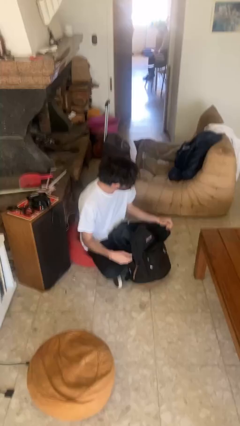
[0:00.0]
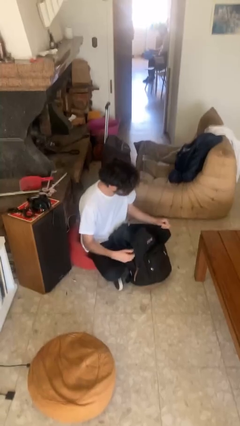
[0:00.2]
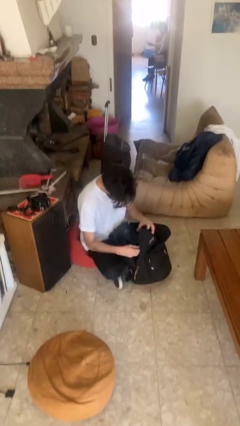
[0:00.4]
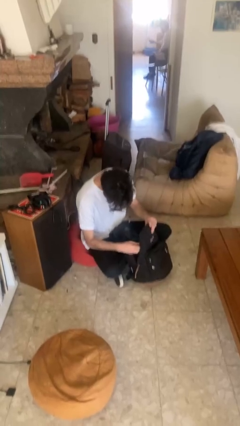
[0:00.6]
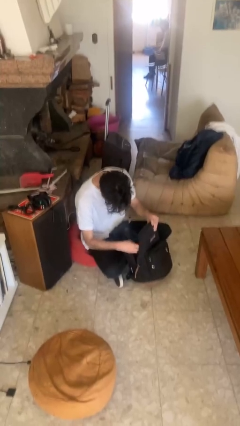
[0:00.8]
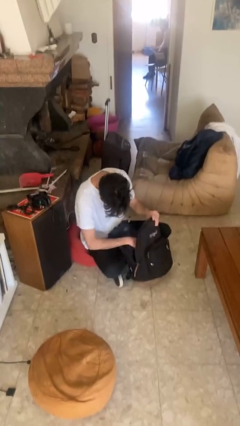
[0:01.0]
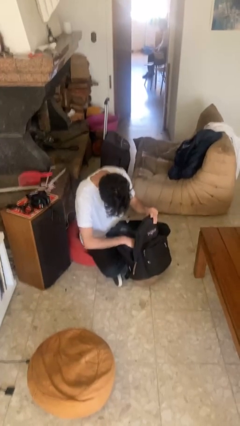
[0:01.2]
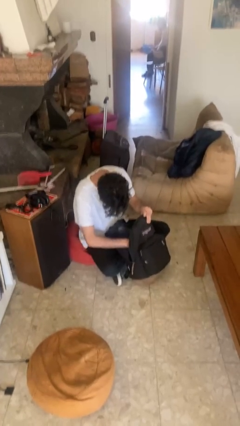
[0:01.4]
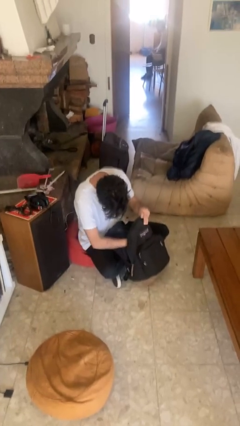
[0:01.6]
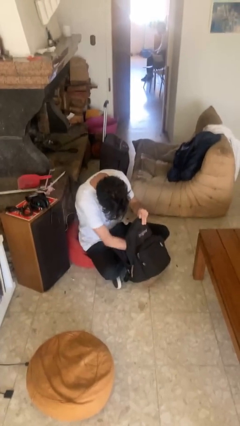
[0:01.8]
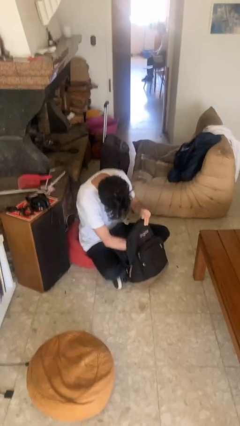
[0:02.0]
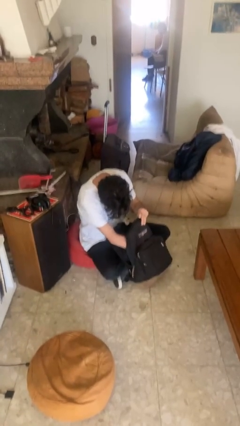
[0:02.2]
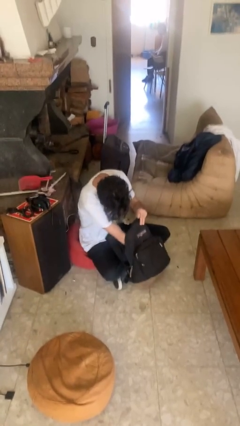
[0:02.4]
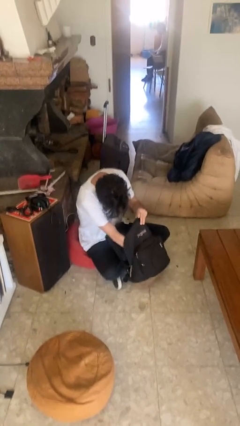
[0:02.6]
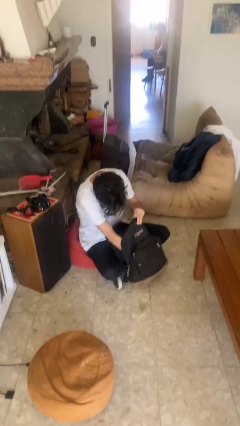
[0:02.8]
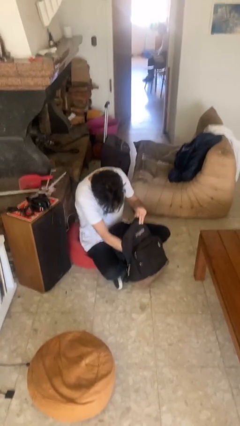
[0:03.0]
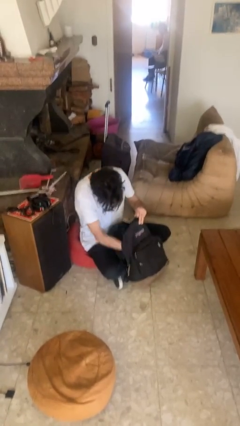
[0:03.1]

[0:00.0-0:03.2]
person searches in backpack

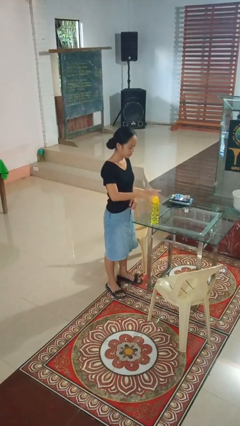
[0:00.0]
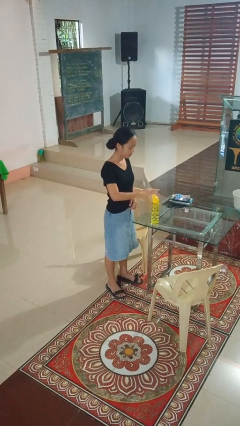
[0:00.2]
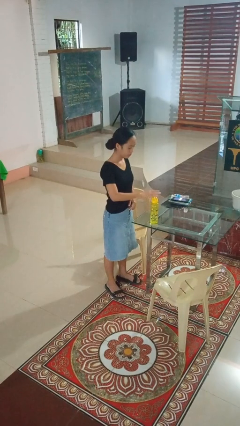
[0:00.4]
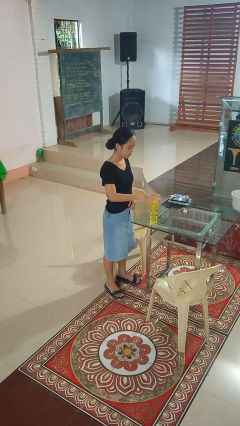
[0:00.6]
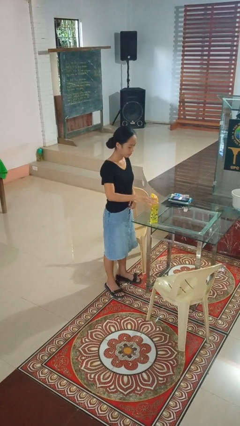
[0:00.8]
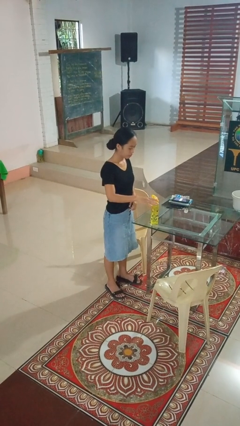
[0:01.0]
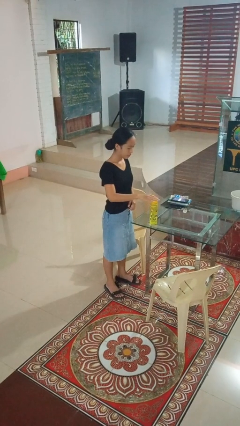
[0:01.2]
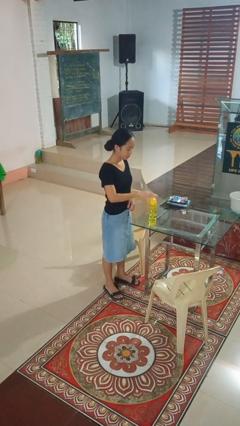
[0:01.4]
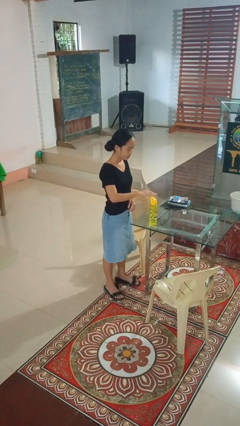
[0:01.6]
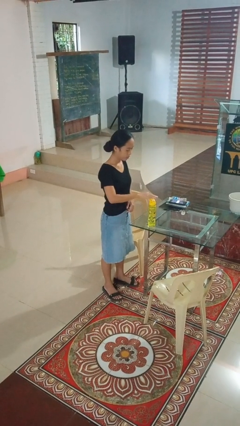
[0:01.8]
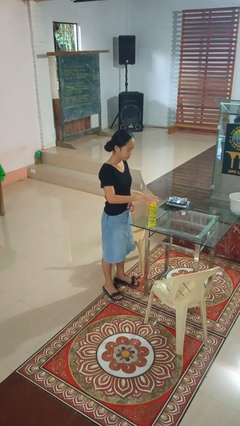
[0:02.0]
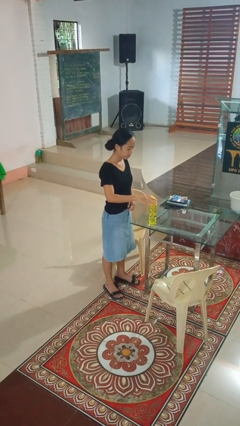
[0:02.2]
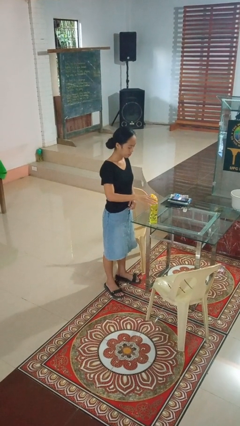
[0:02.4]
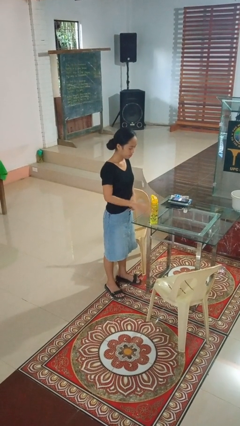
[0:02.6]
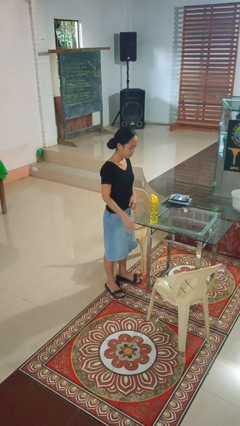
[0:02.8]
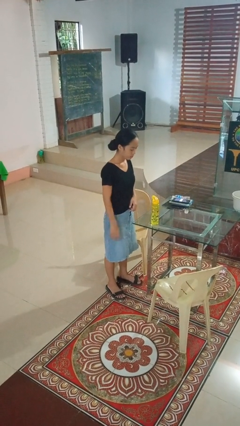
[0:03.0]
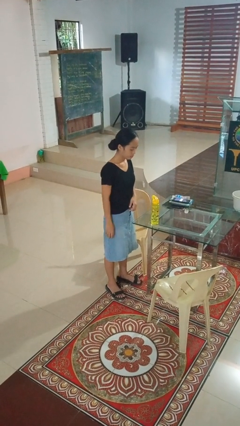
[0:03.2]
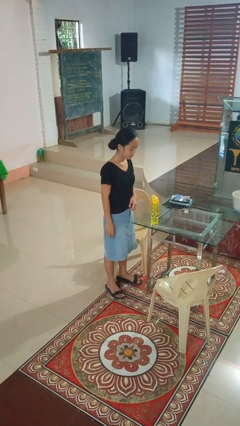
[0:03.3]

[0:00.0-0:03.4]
person waves hand over object

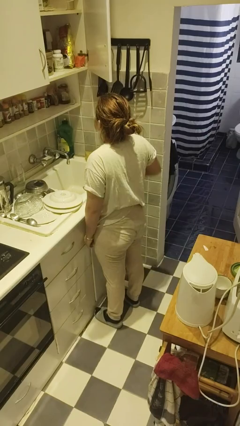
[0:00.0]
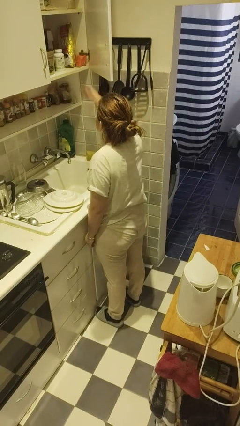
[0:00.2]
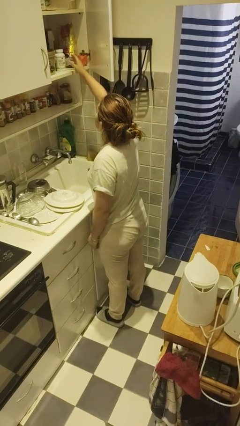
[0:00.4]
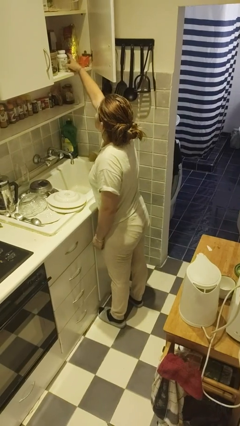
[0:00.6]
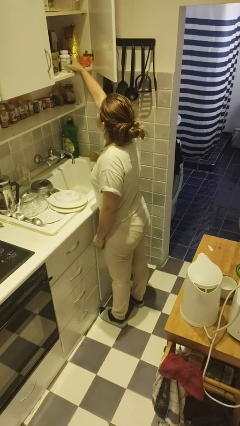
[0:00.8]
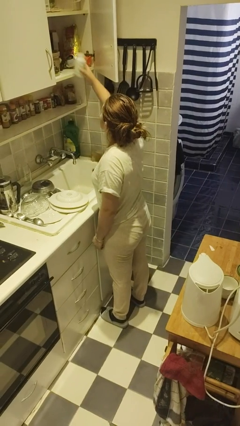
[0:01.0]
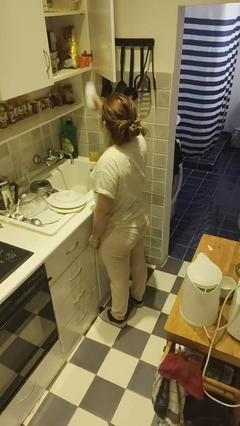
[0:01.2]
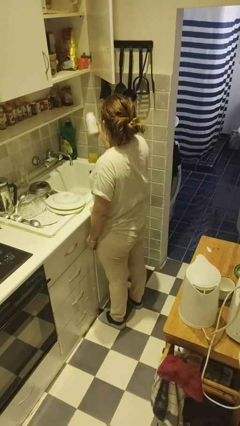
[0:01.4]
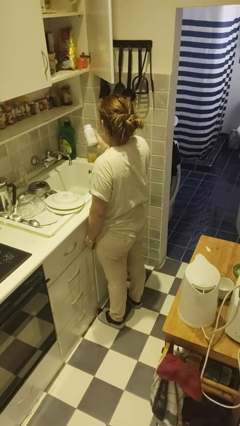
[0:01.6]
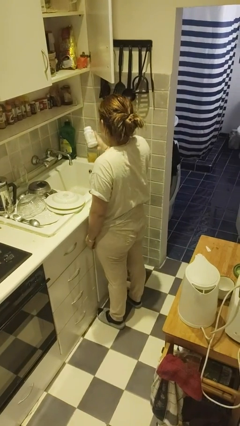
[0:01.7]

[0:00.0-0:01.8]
person picks up object from cabinet

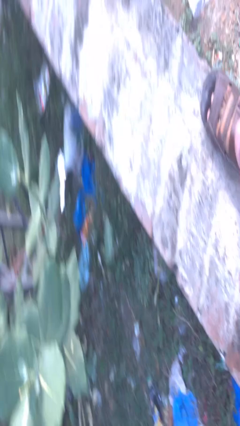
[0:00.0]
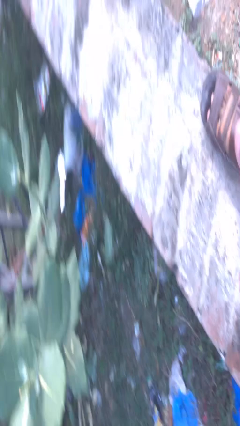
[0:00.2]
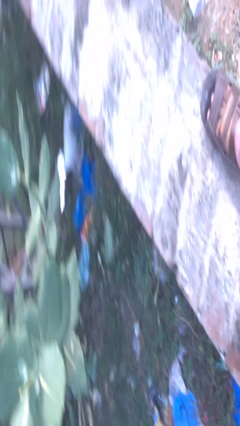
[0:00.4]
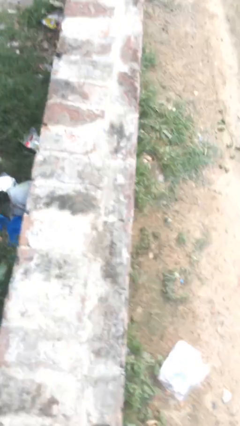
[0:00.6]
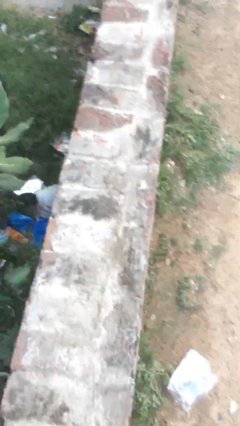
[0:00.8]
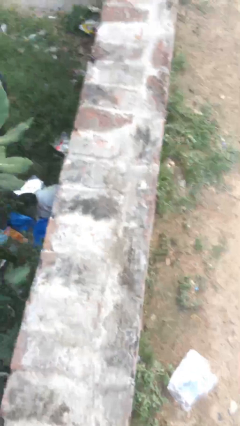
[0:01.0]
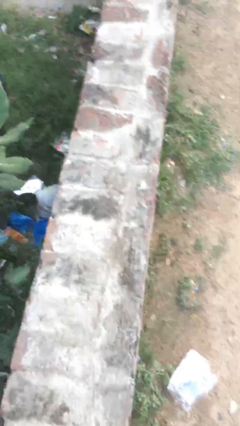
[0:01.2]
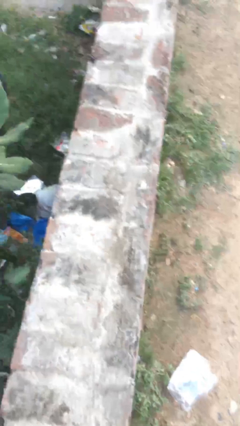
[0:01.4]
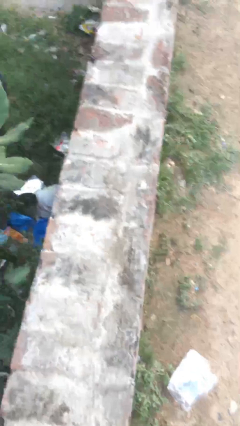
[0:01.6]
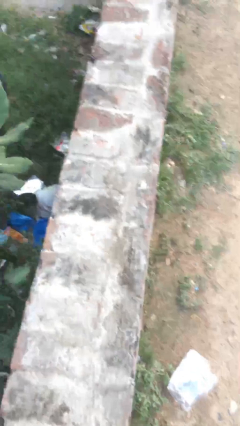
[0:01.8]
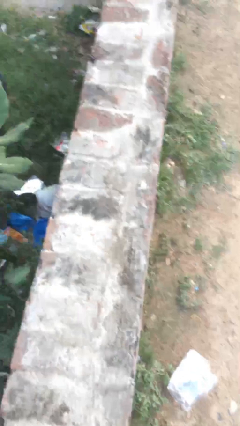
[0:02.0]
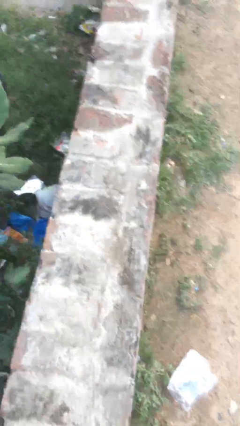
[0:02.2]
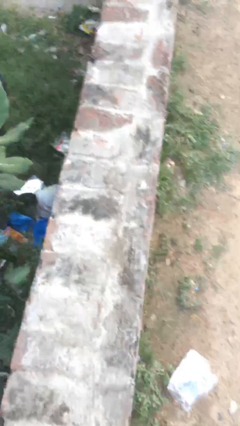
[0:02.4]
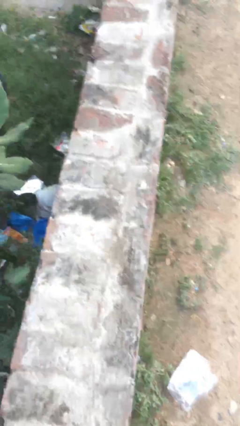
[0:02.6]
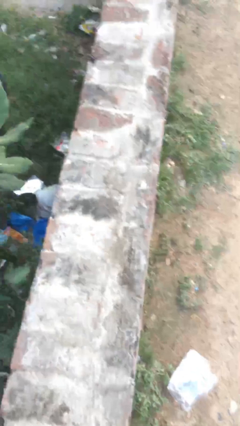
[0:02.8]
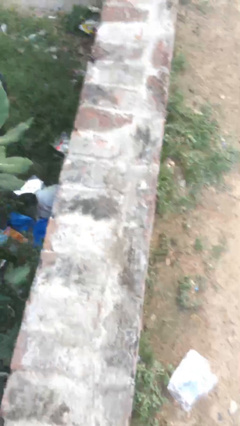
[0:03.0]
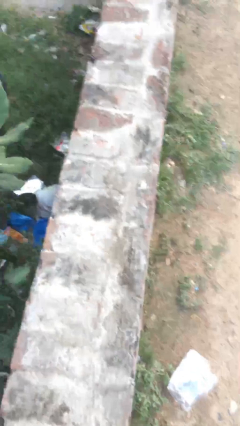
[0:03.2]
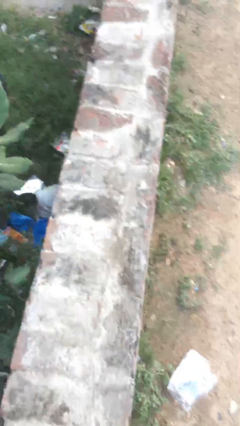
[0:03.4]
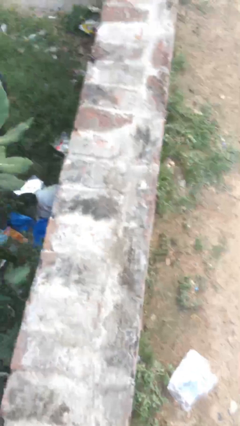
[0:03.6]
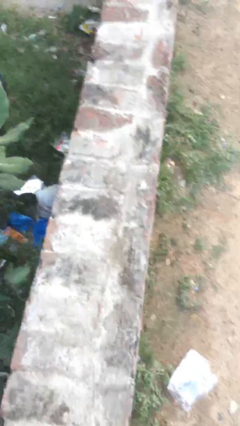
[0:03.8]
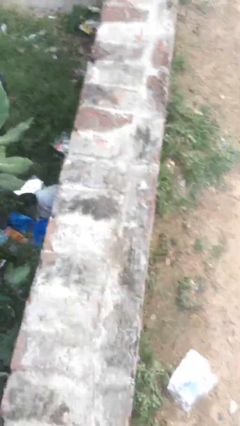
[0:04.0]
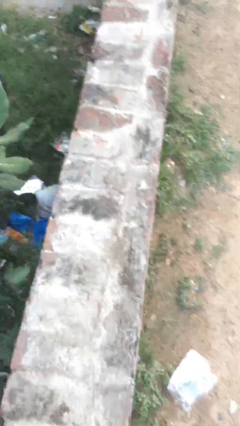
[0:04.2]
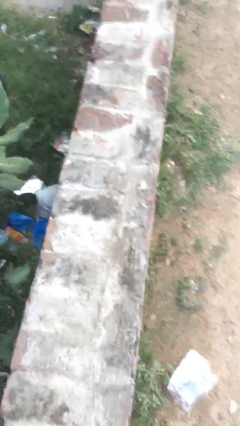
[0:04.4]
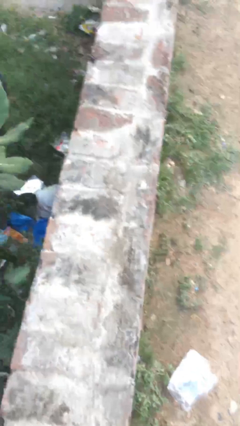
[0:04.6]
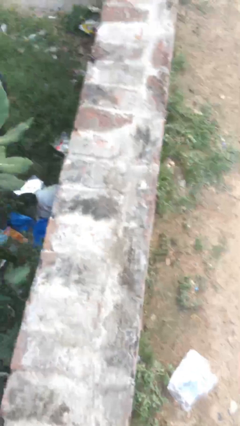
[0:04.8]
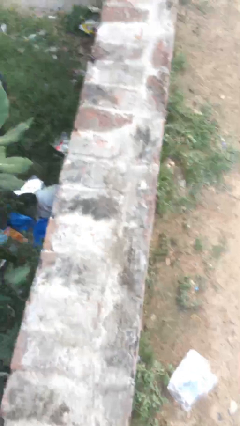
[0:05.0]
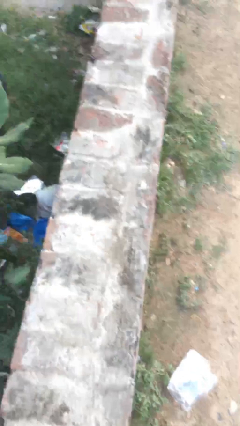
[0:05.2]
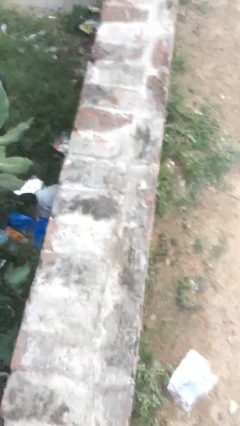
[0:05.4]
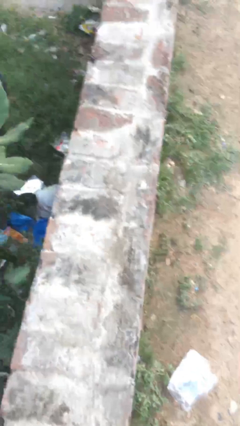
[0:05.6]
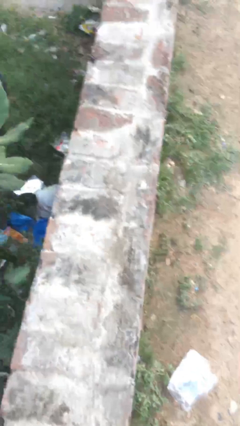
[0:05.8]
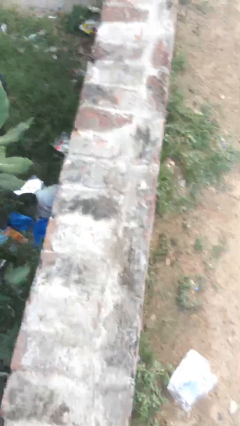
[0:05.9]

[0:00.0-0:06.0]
person puts down object on table

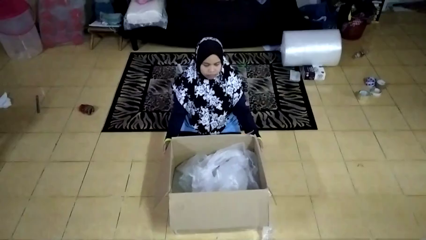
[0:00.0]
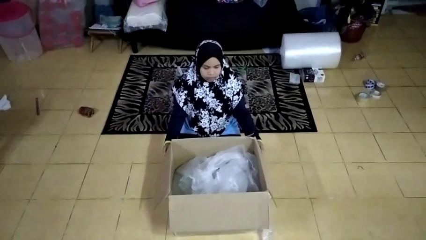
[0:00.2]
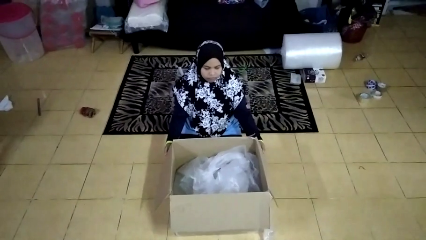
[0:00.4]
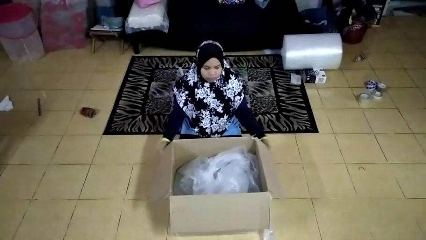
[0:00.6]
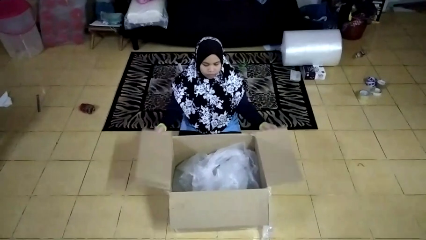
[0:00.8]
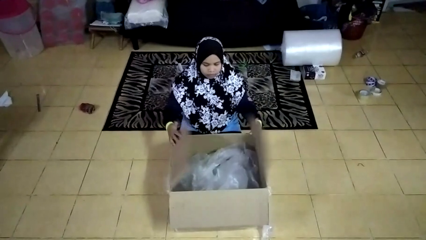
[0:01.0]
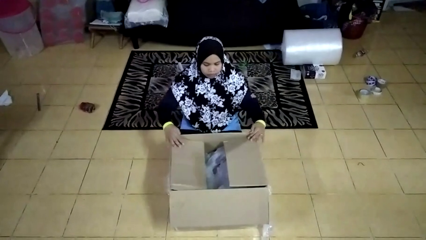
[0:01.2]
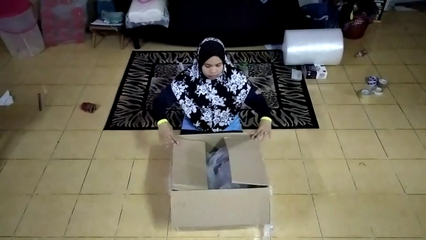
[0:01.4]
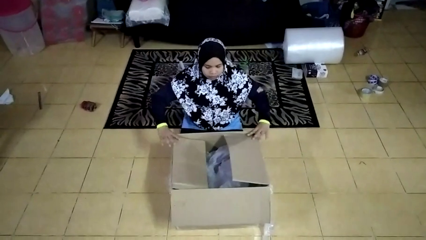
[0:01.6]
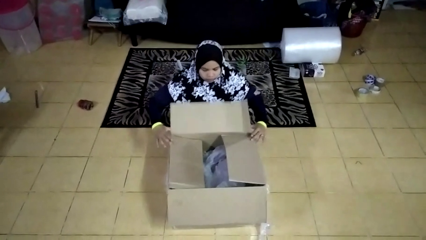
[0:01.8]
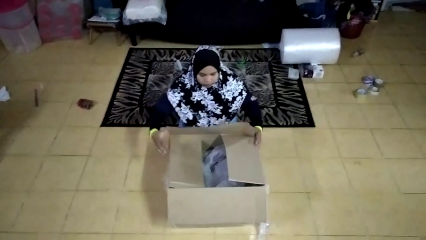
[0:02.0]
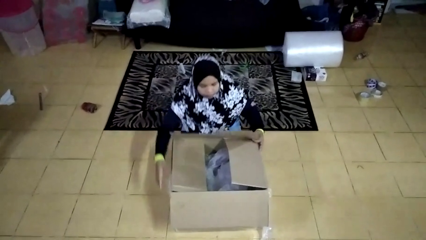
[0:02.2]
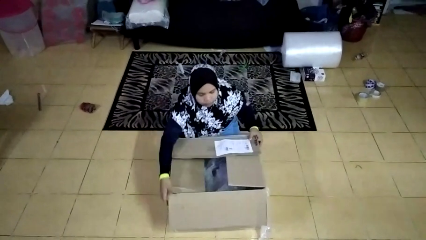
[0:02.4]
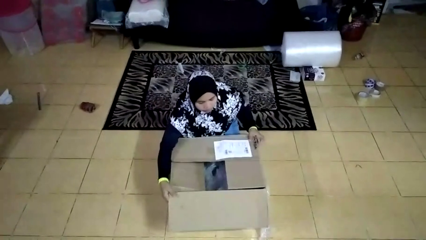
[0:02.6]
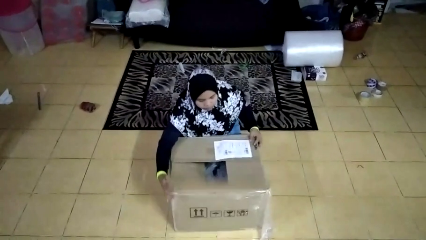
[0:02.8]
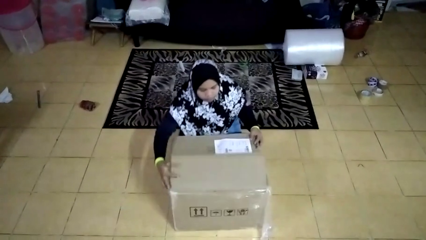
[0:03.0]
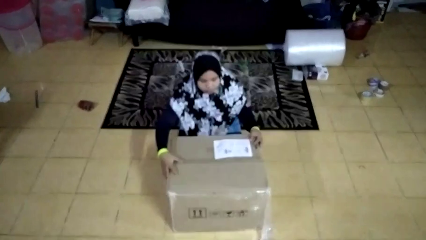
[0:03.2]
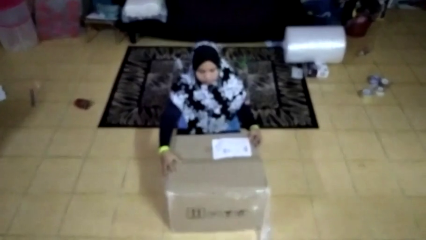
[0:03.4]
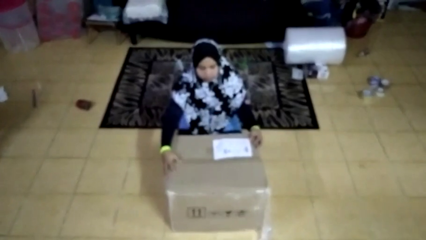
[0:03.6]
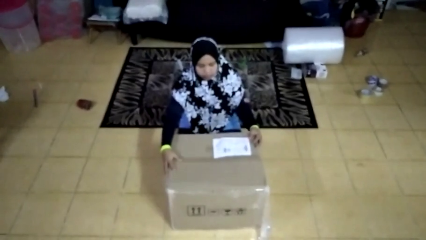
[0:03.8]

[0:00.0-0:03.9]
person closes box
